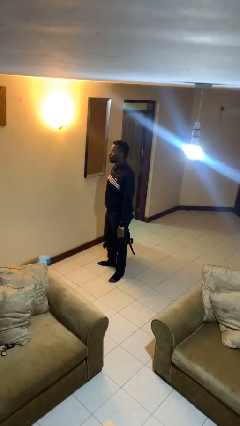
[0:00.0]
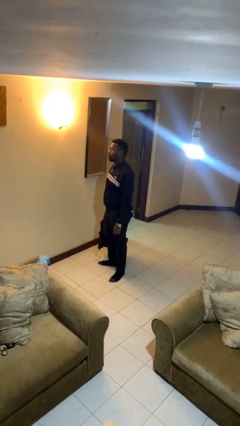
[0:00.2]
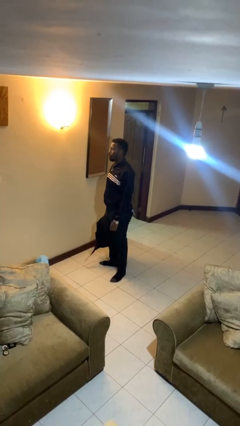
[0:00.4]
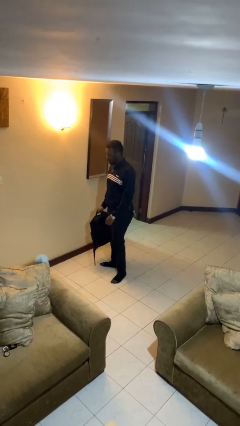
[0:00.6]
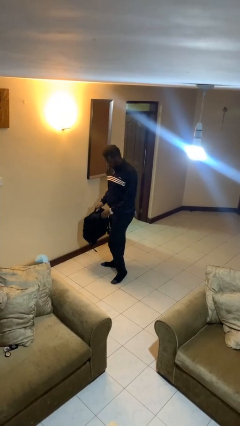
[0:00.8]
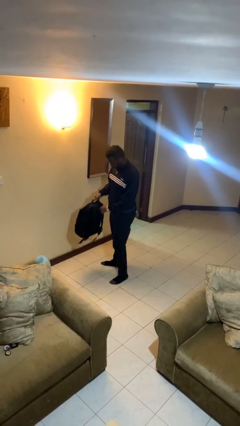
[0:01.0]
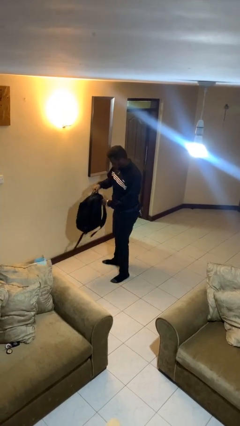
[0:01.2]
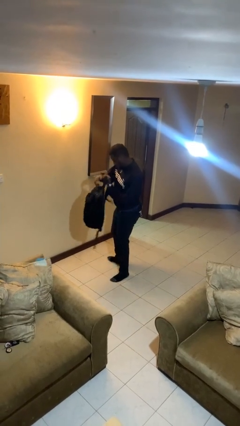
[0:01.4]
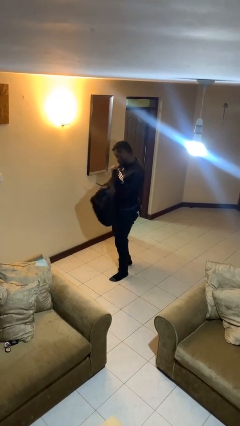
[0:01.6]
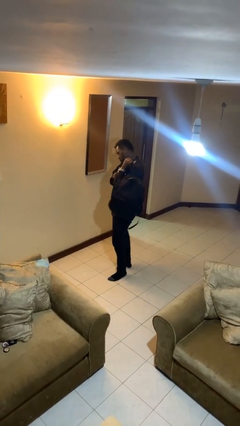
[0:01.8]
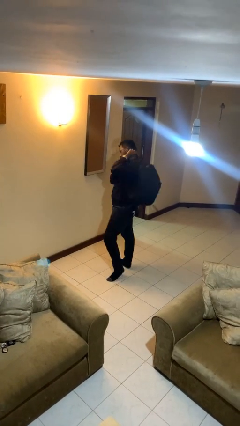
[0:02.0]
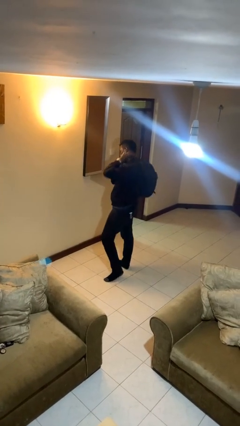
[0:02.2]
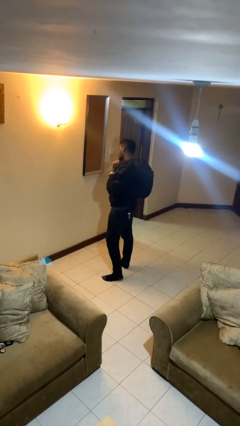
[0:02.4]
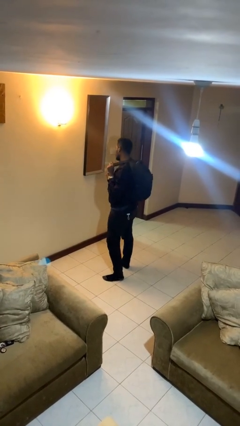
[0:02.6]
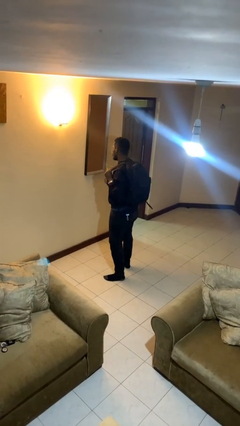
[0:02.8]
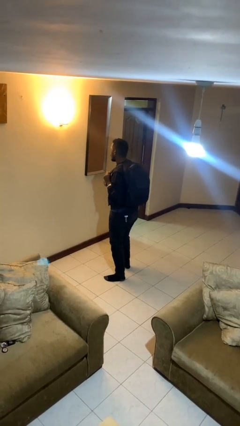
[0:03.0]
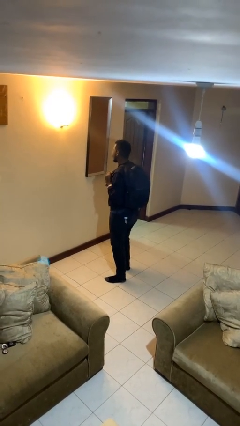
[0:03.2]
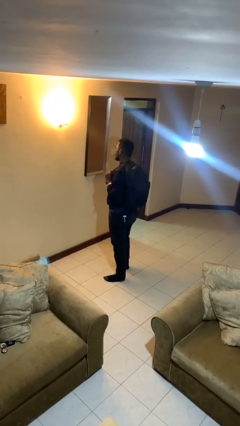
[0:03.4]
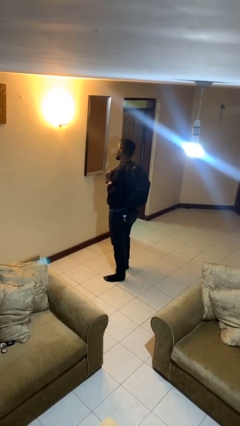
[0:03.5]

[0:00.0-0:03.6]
person puts on backpack

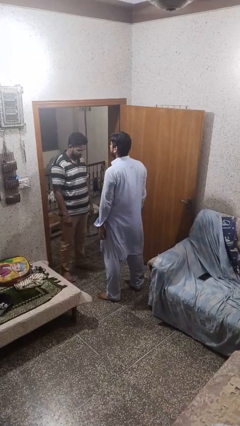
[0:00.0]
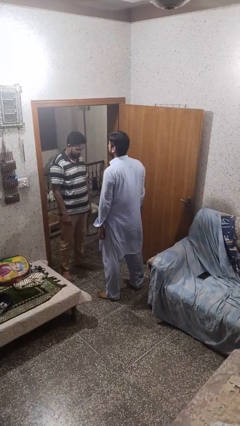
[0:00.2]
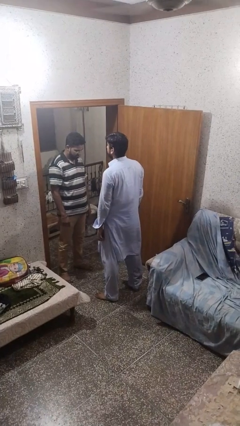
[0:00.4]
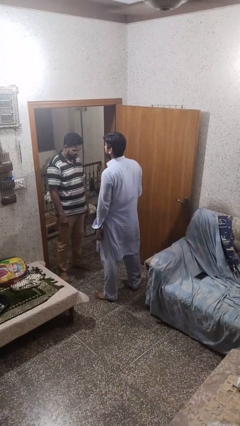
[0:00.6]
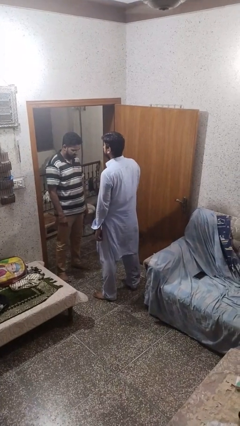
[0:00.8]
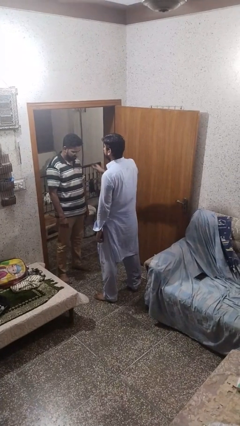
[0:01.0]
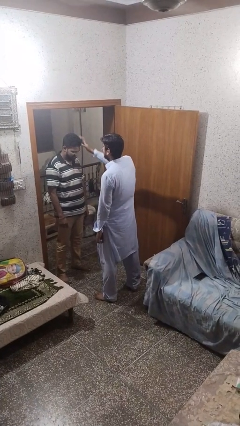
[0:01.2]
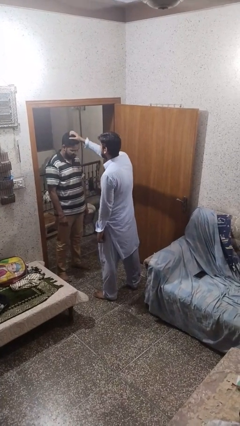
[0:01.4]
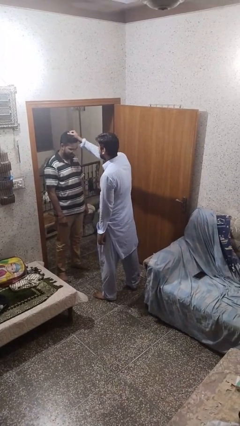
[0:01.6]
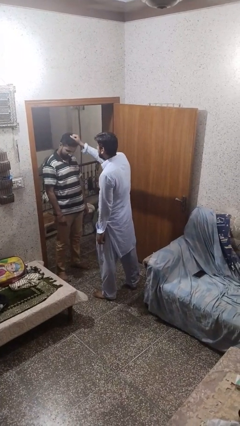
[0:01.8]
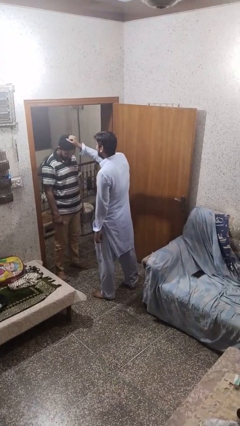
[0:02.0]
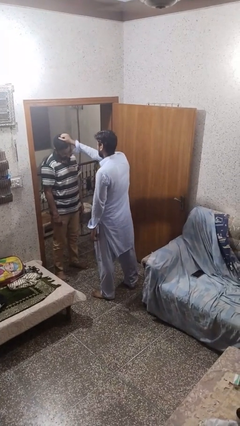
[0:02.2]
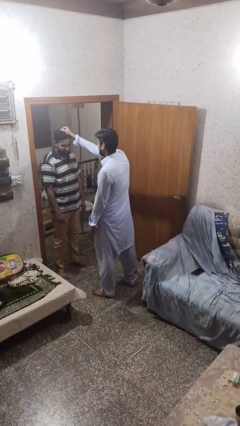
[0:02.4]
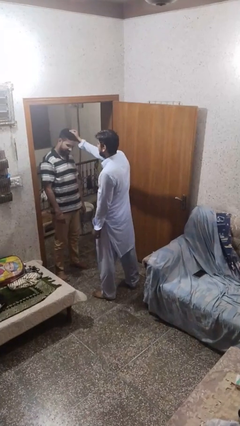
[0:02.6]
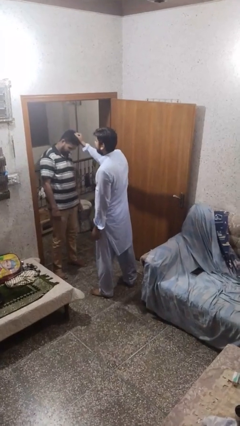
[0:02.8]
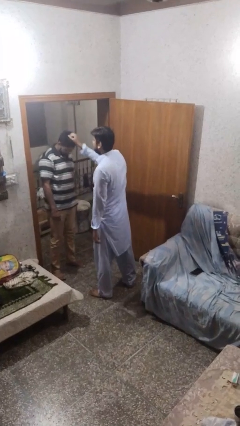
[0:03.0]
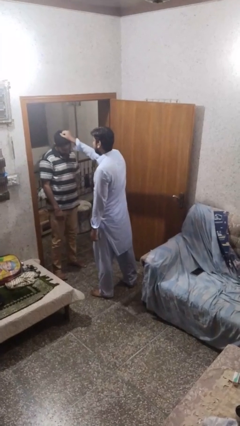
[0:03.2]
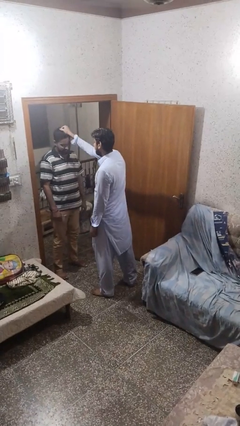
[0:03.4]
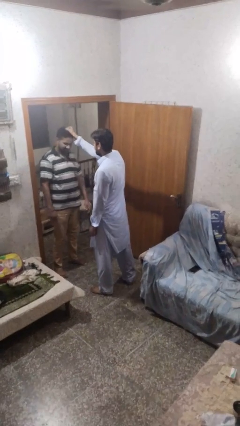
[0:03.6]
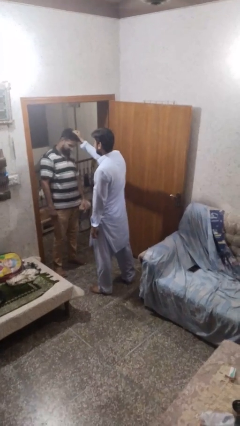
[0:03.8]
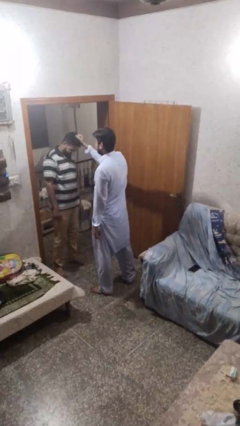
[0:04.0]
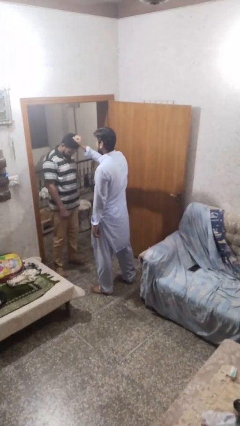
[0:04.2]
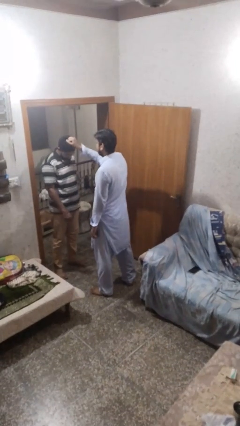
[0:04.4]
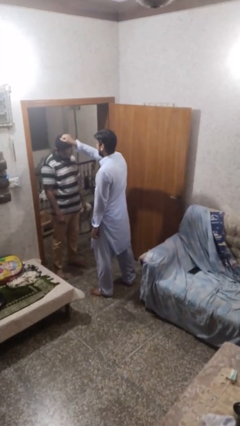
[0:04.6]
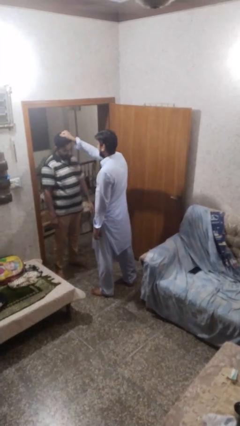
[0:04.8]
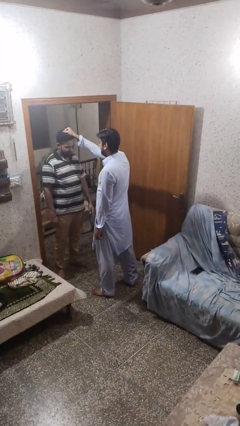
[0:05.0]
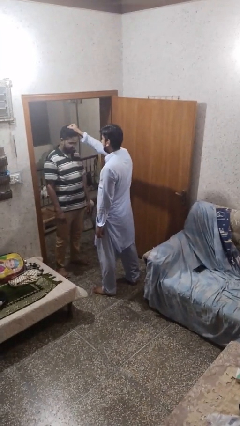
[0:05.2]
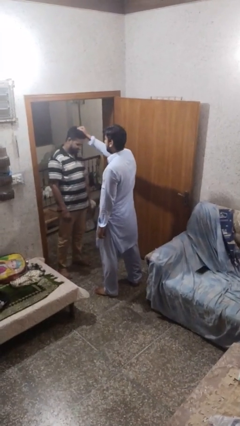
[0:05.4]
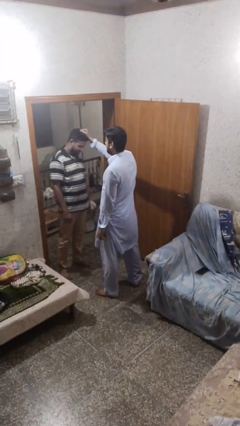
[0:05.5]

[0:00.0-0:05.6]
person grabs person by hair

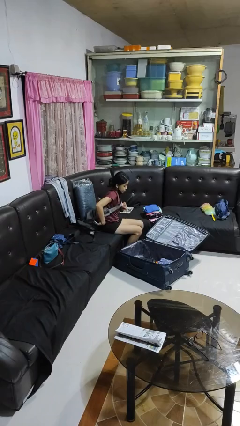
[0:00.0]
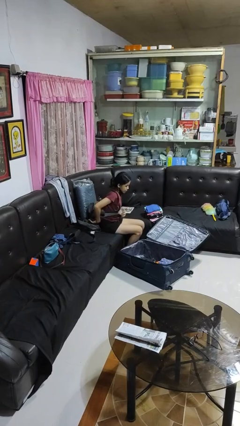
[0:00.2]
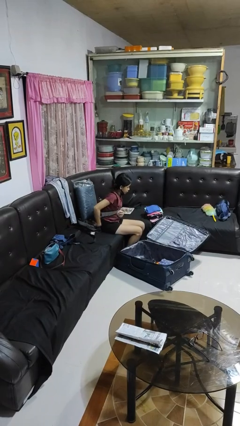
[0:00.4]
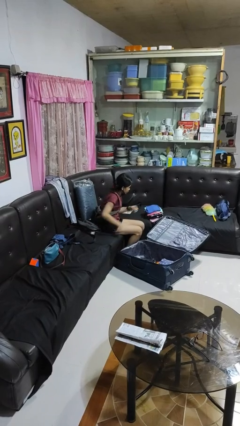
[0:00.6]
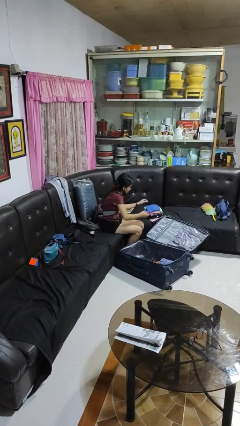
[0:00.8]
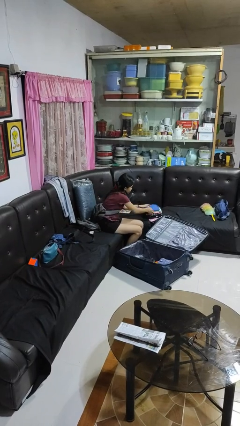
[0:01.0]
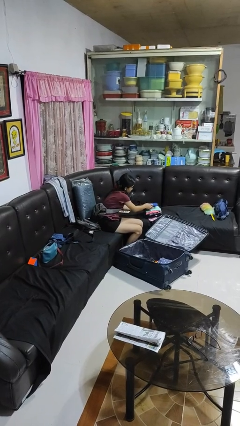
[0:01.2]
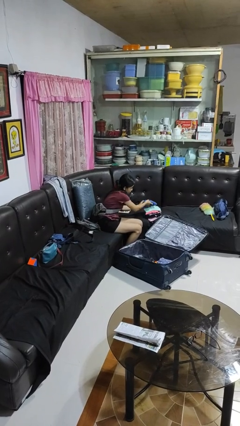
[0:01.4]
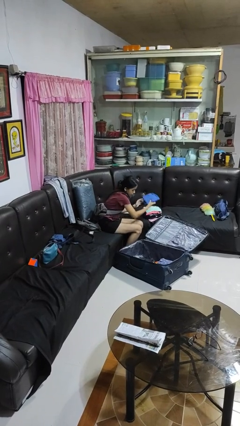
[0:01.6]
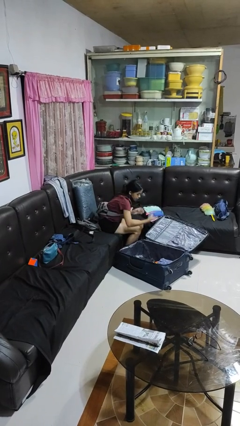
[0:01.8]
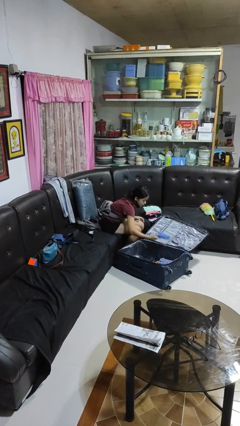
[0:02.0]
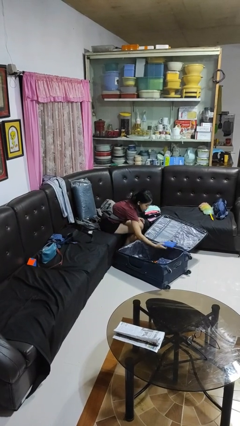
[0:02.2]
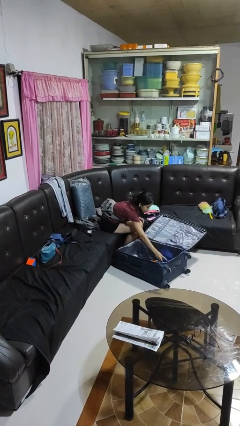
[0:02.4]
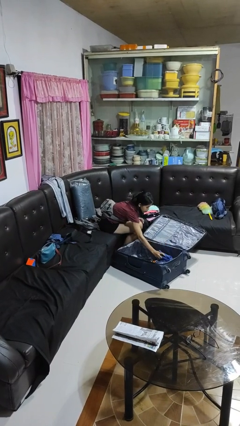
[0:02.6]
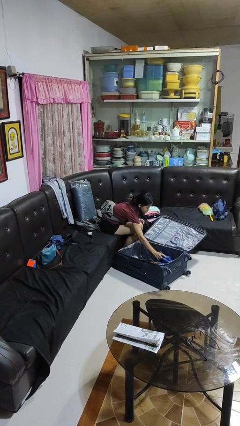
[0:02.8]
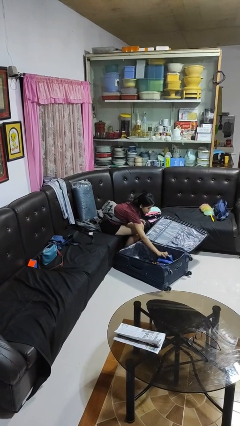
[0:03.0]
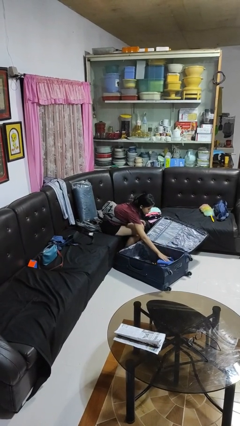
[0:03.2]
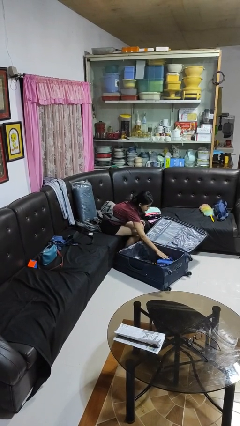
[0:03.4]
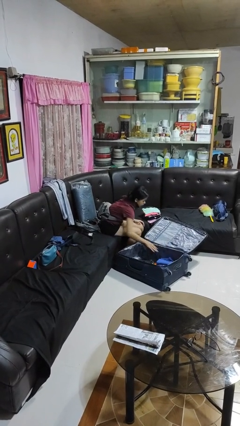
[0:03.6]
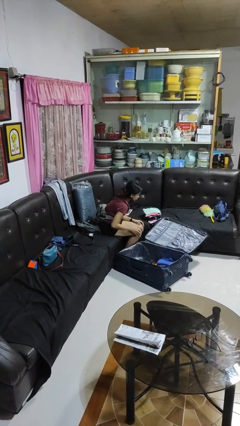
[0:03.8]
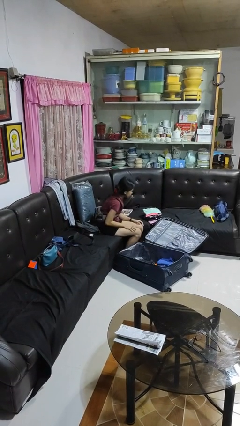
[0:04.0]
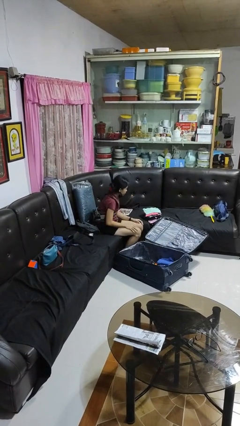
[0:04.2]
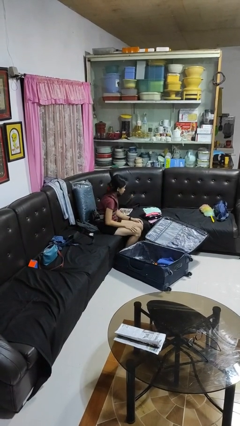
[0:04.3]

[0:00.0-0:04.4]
person loads clothes into suitcase

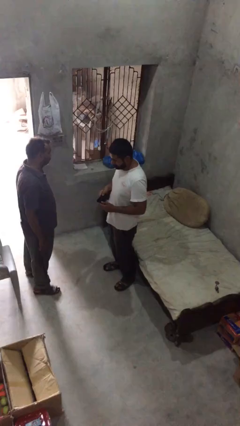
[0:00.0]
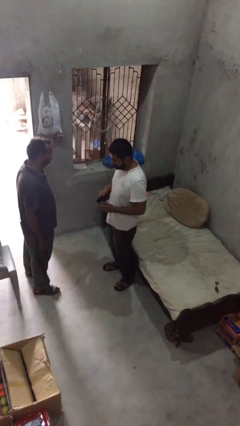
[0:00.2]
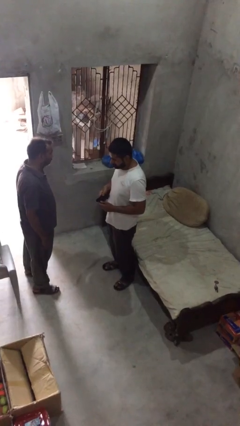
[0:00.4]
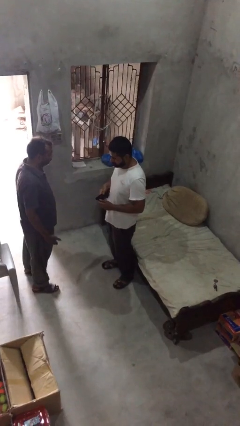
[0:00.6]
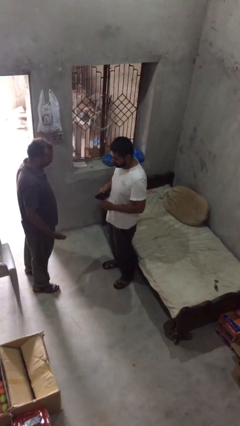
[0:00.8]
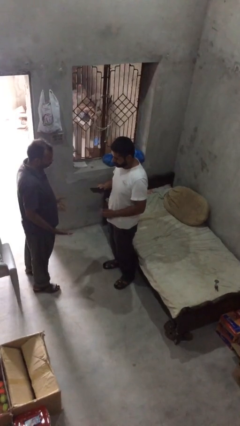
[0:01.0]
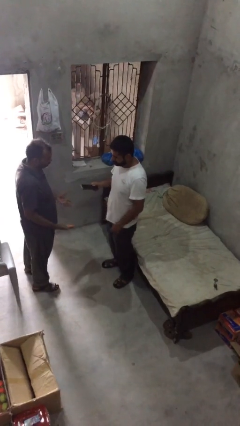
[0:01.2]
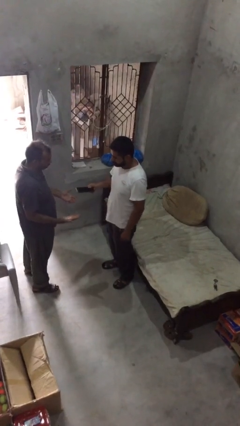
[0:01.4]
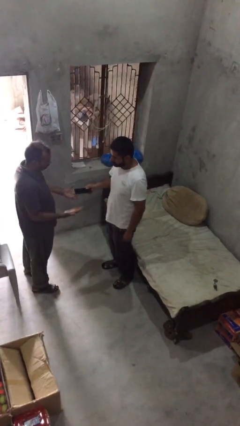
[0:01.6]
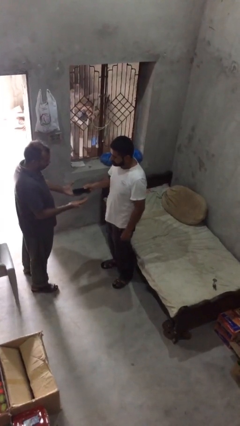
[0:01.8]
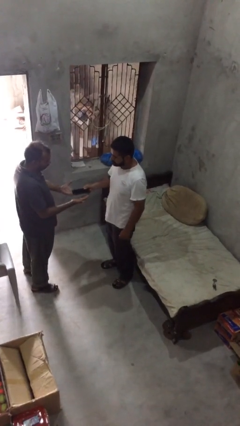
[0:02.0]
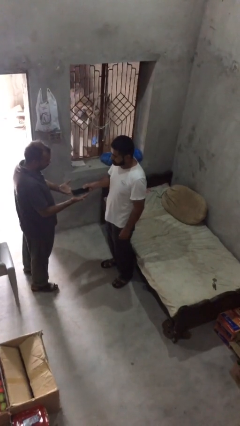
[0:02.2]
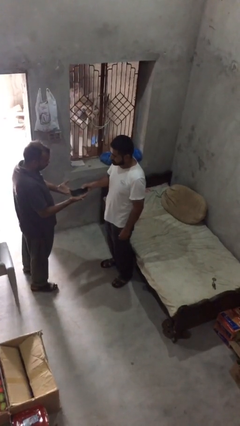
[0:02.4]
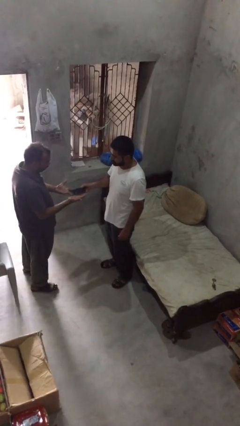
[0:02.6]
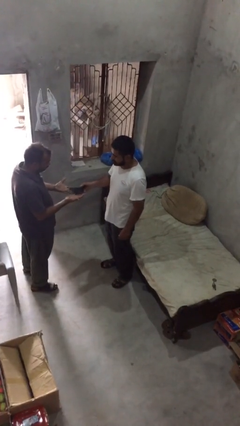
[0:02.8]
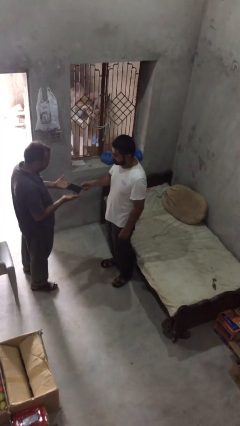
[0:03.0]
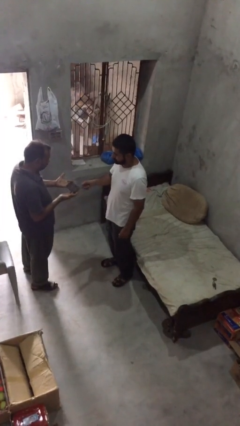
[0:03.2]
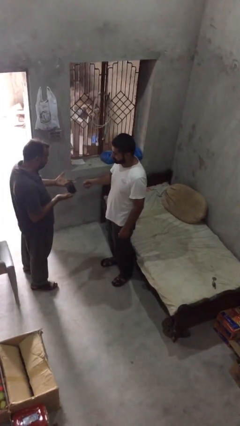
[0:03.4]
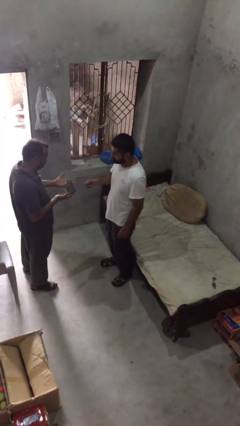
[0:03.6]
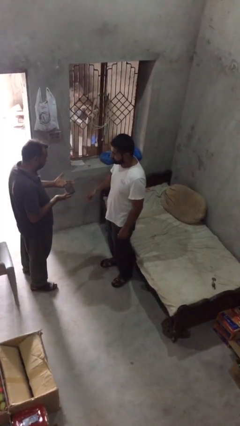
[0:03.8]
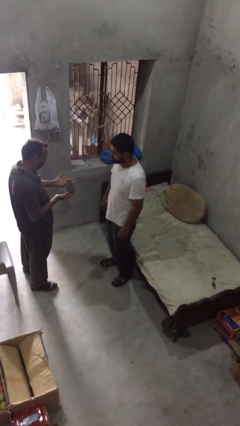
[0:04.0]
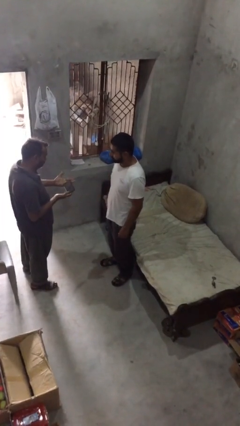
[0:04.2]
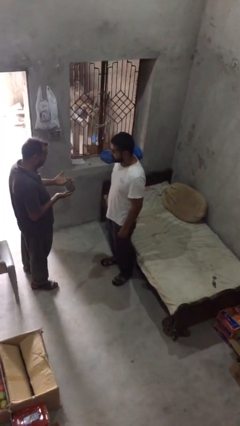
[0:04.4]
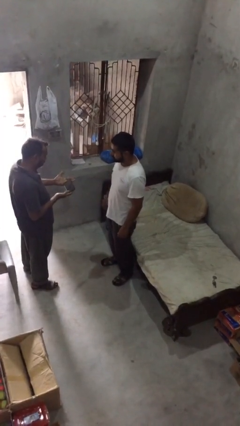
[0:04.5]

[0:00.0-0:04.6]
person transfers object to person
